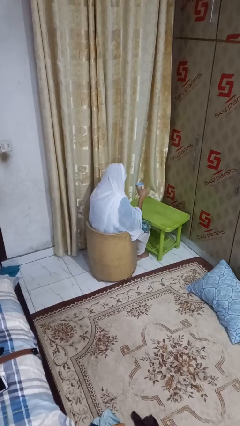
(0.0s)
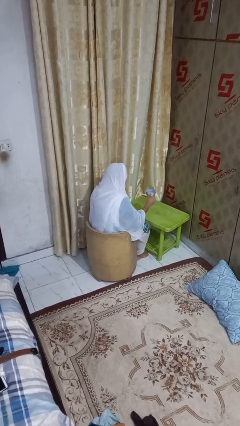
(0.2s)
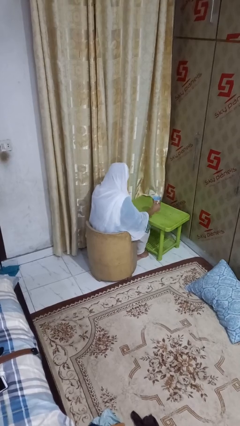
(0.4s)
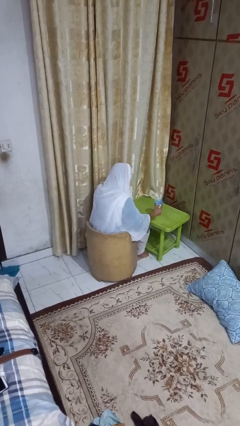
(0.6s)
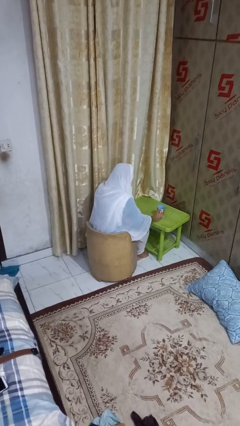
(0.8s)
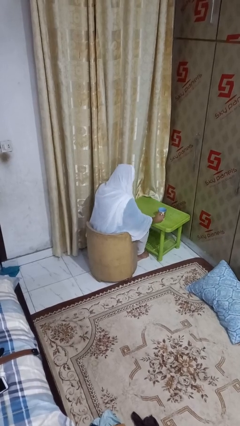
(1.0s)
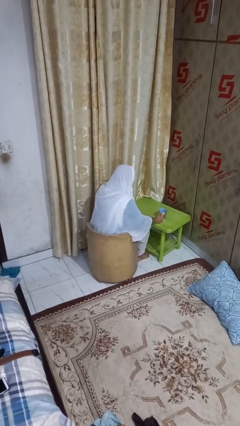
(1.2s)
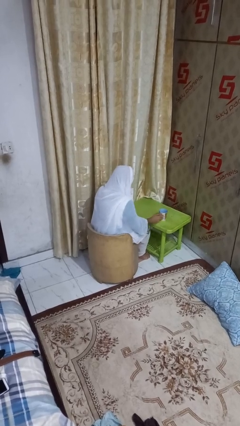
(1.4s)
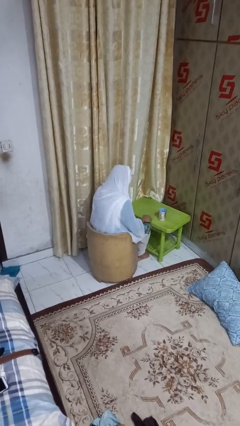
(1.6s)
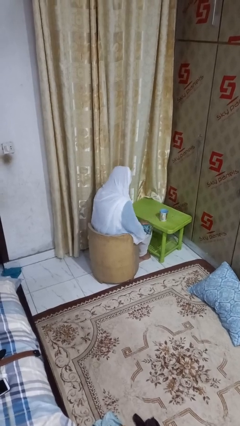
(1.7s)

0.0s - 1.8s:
person puts down object on table

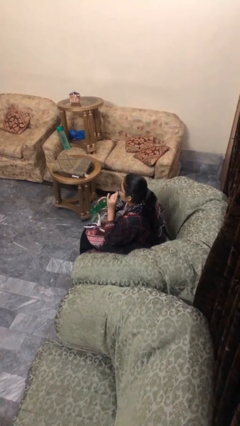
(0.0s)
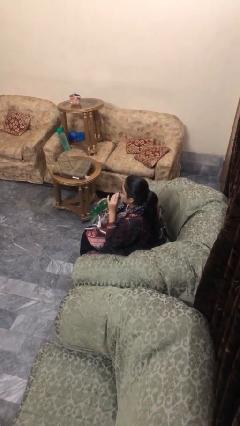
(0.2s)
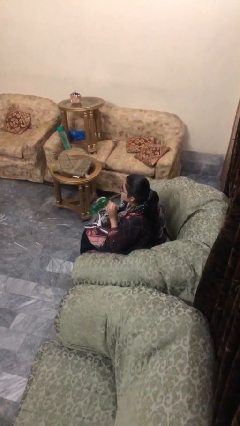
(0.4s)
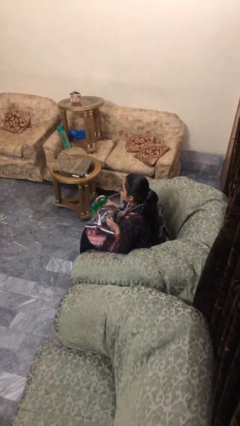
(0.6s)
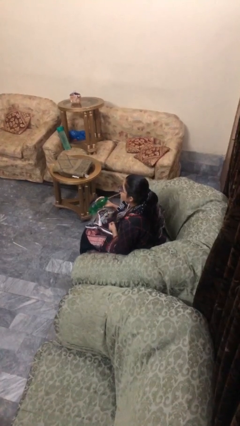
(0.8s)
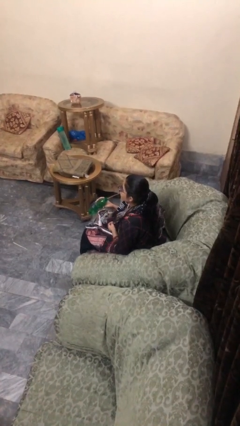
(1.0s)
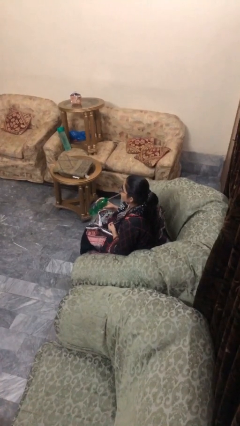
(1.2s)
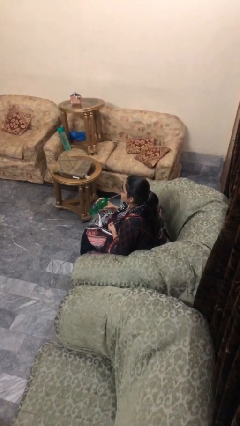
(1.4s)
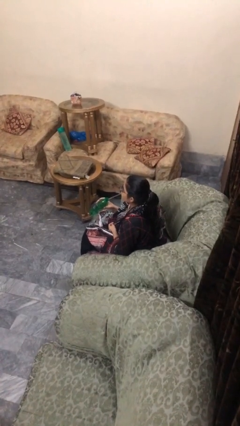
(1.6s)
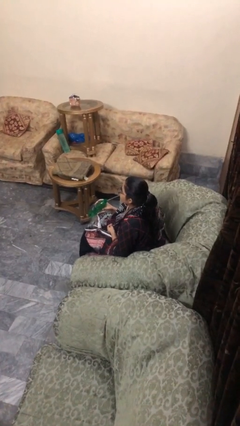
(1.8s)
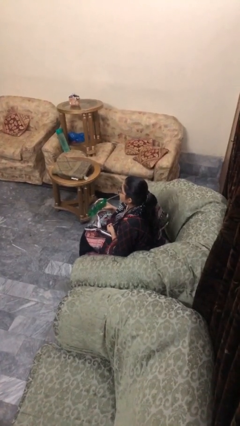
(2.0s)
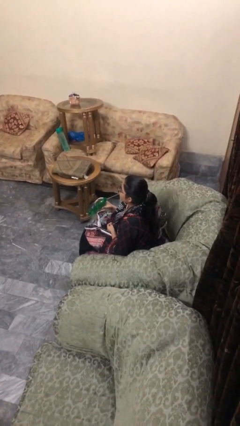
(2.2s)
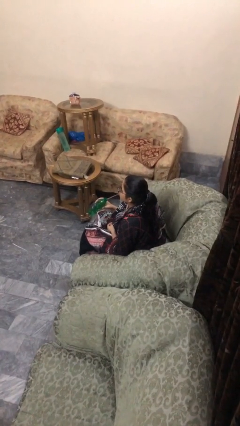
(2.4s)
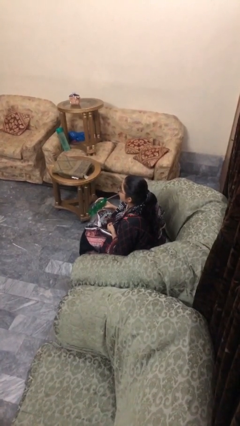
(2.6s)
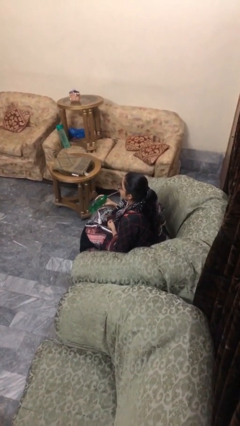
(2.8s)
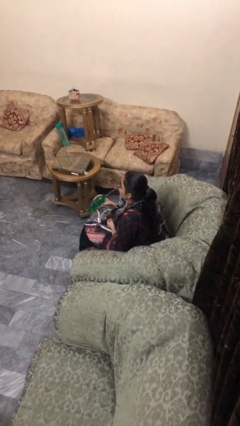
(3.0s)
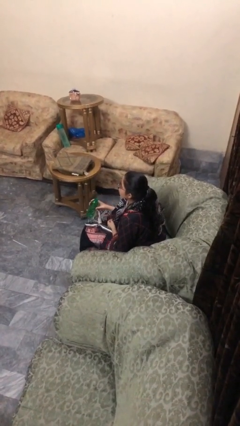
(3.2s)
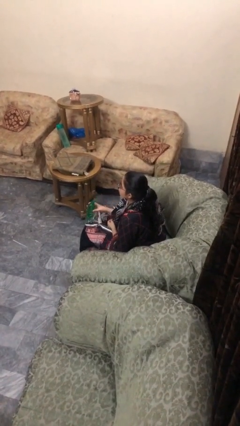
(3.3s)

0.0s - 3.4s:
person drinks from straw

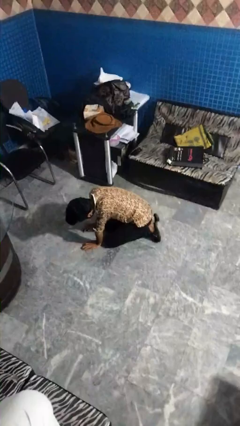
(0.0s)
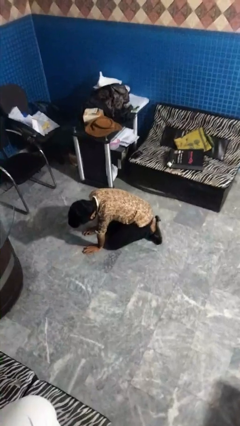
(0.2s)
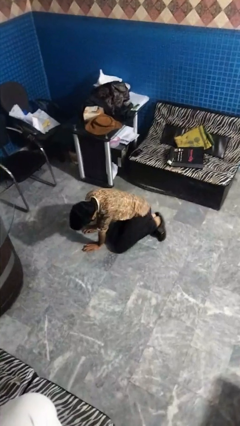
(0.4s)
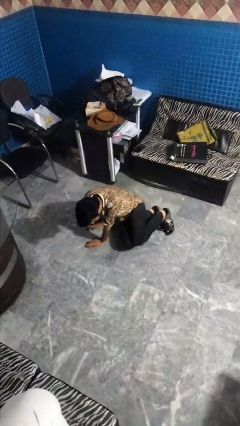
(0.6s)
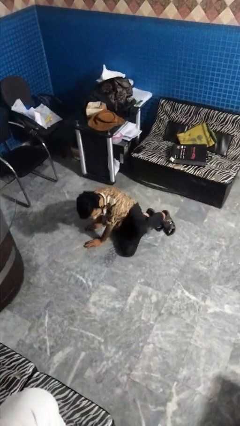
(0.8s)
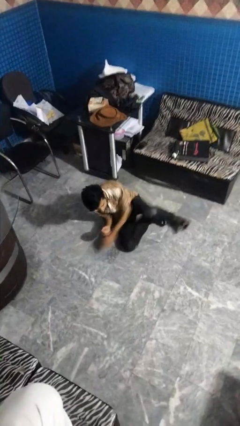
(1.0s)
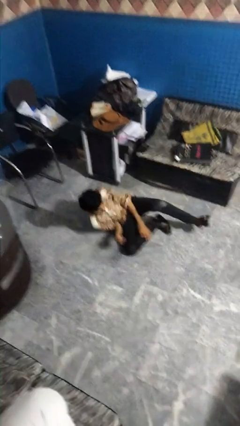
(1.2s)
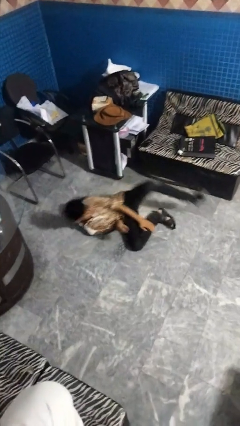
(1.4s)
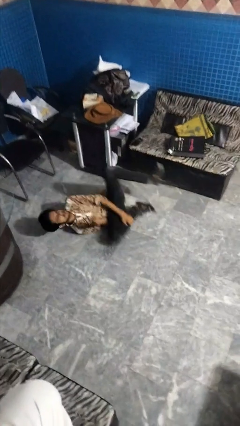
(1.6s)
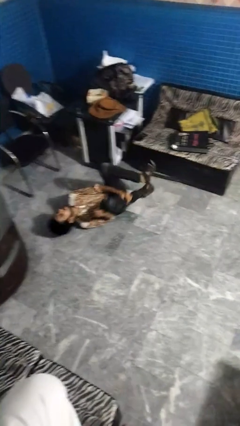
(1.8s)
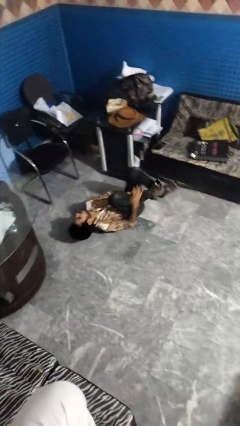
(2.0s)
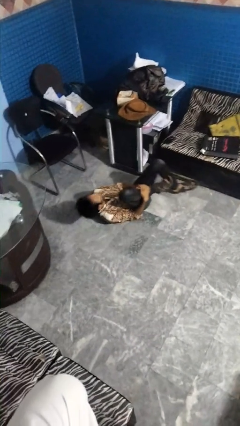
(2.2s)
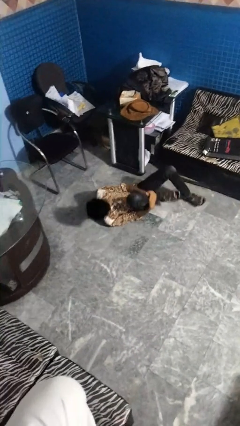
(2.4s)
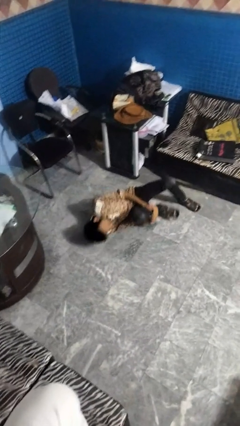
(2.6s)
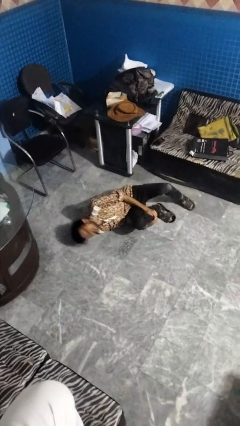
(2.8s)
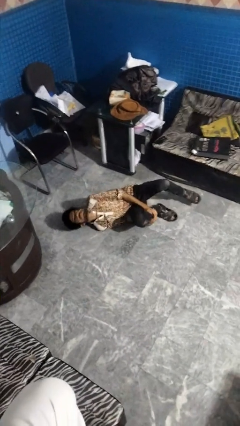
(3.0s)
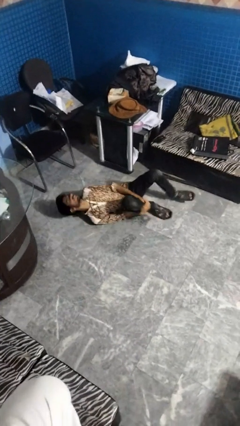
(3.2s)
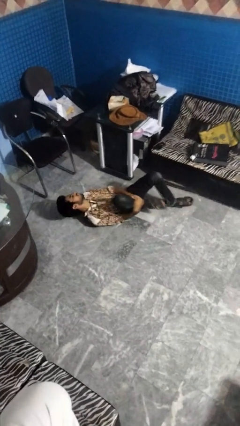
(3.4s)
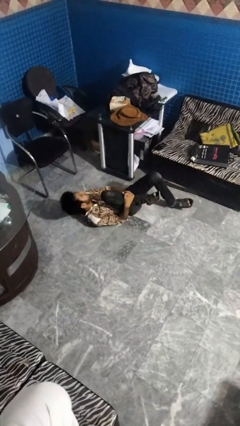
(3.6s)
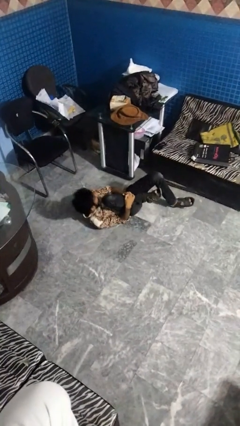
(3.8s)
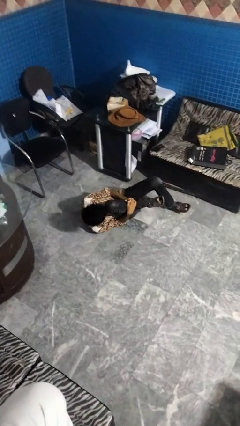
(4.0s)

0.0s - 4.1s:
person lies down on floor

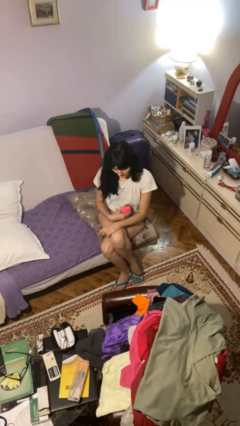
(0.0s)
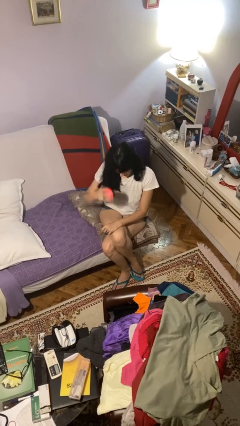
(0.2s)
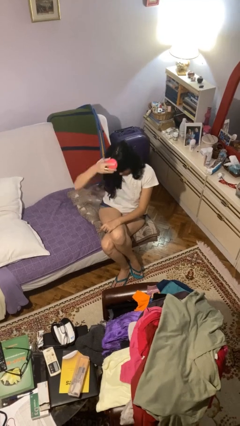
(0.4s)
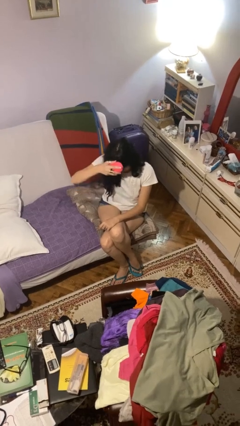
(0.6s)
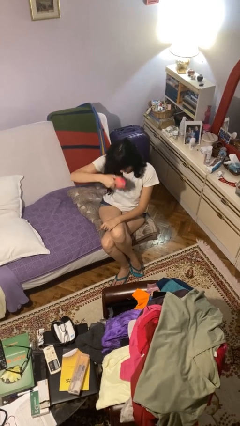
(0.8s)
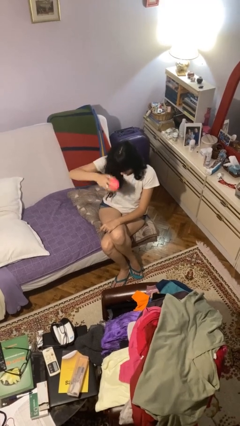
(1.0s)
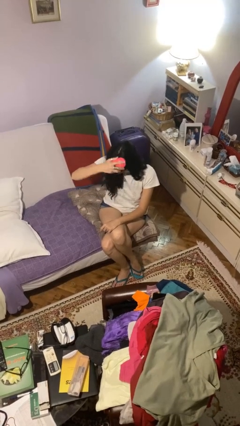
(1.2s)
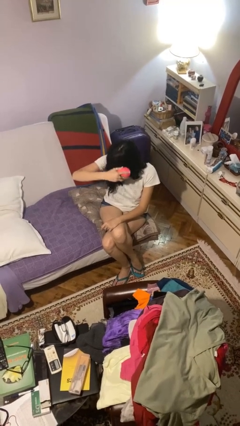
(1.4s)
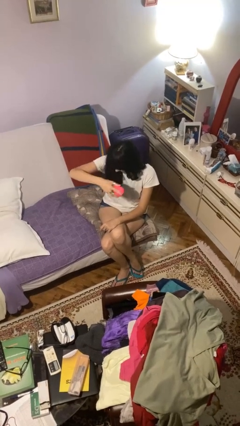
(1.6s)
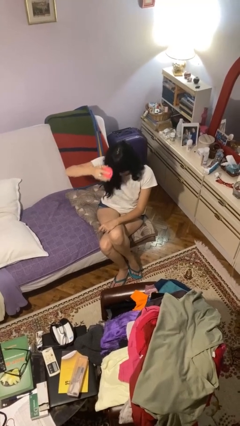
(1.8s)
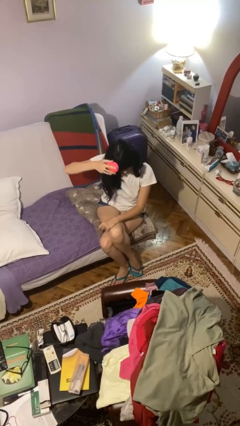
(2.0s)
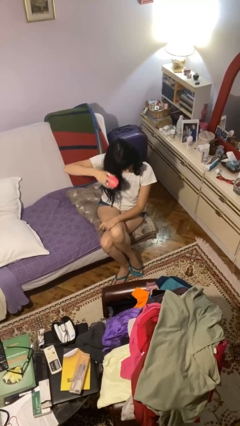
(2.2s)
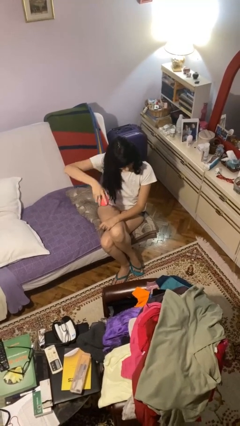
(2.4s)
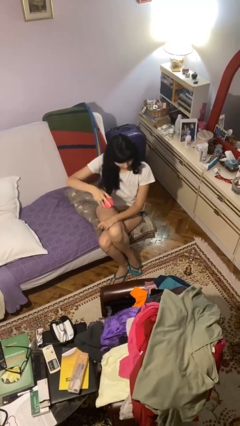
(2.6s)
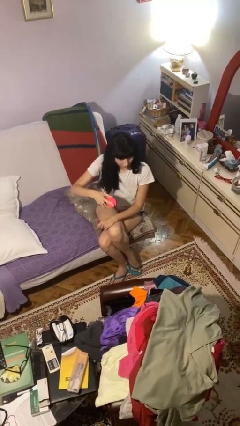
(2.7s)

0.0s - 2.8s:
person brushes hair

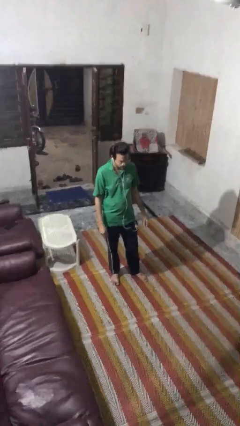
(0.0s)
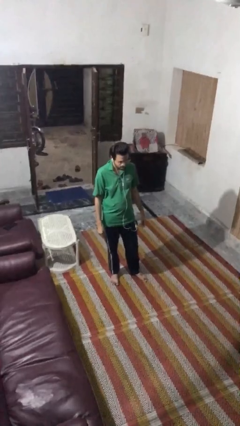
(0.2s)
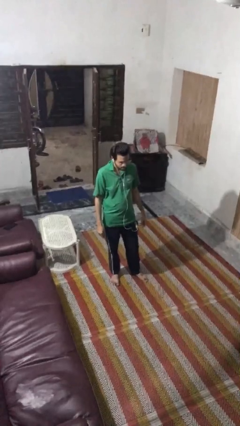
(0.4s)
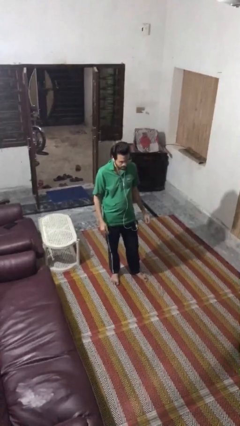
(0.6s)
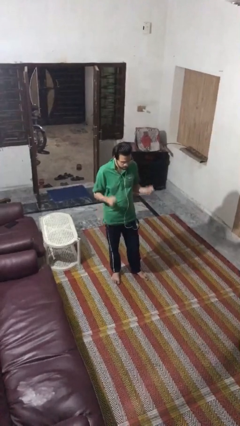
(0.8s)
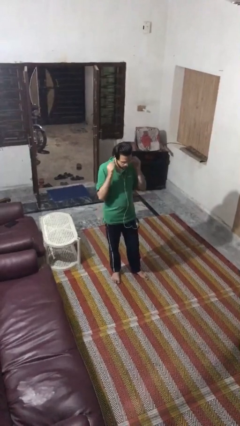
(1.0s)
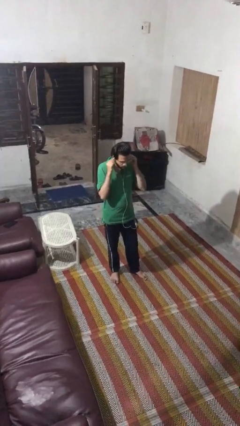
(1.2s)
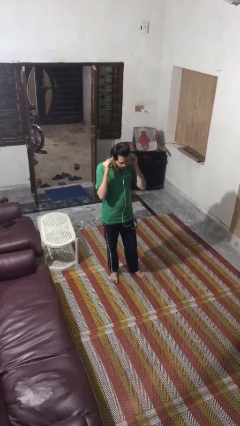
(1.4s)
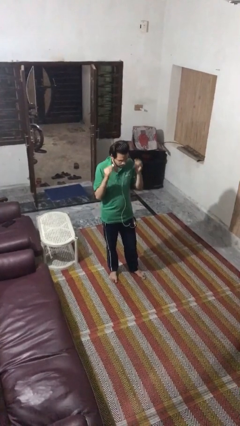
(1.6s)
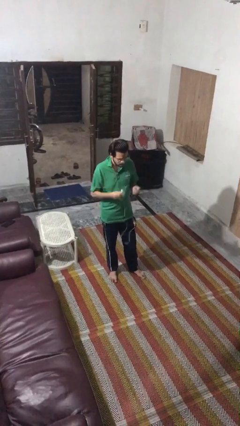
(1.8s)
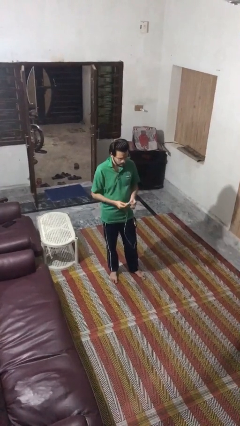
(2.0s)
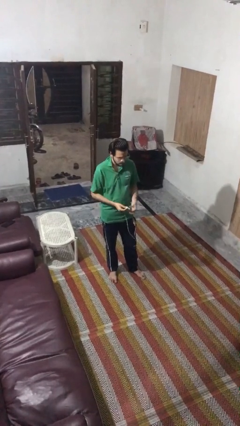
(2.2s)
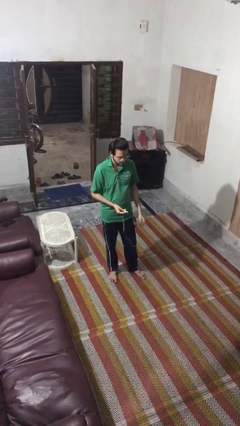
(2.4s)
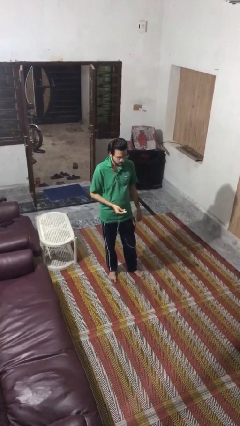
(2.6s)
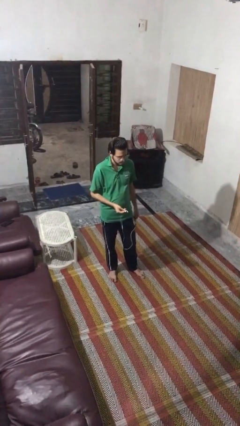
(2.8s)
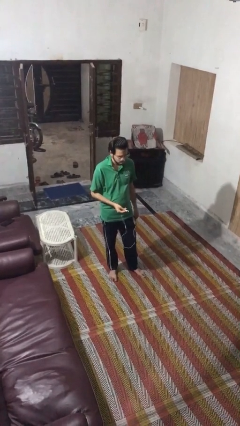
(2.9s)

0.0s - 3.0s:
person takes off headphones

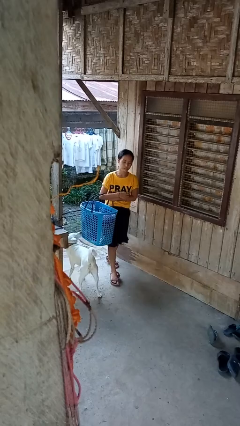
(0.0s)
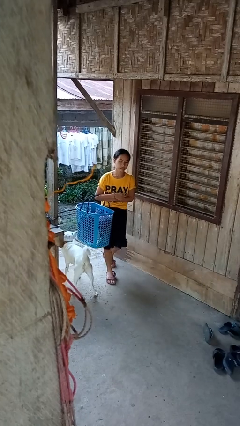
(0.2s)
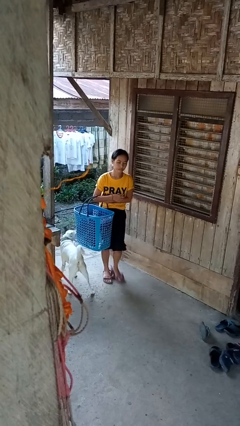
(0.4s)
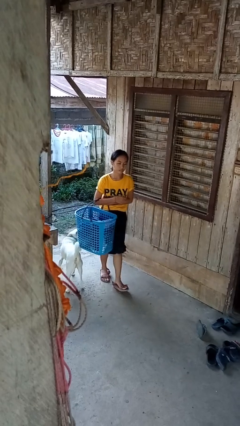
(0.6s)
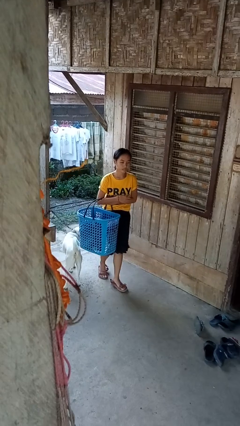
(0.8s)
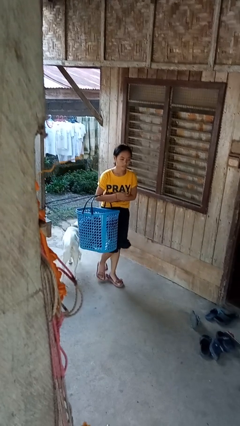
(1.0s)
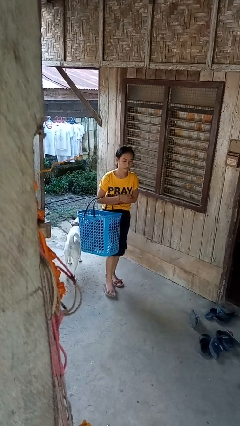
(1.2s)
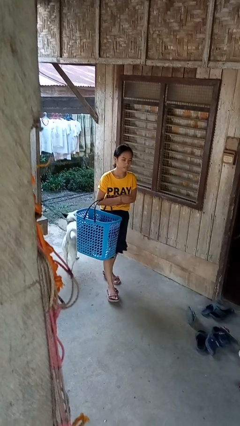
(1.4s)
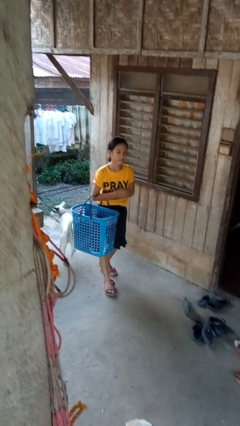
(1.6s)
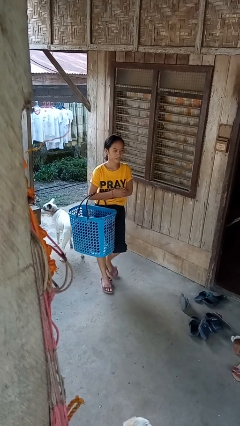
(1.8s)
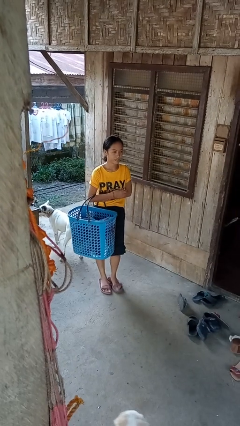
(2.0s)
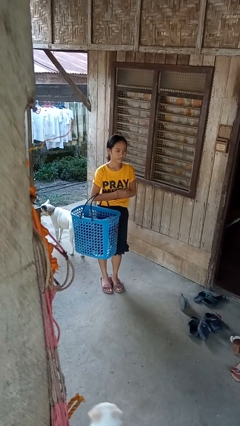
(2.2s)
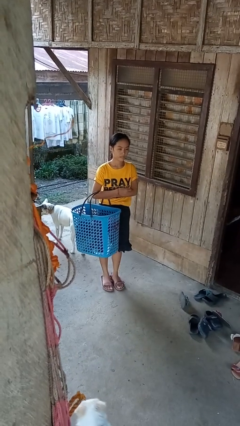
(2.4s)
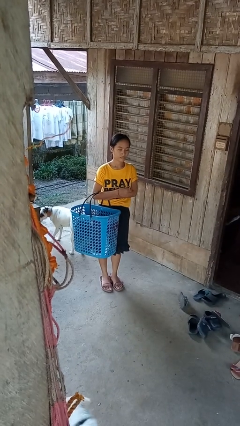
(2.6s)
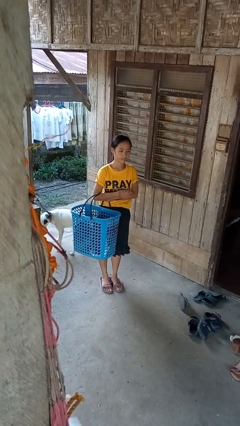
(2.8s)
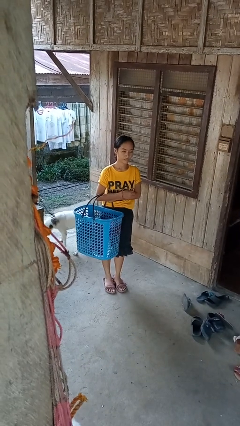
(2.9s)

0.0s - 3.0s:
person carries laundry basket
